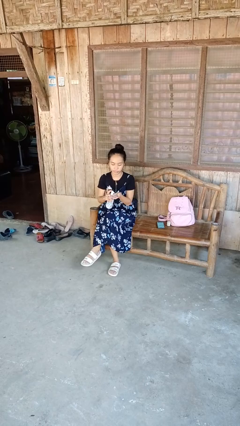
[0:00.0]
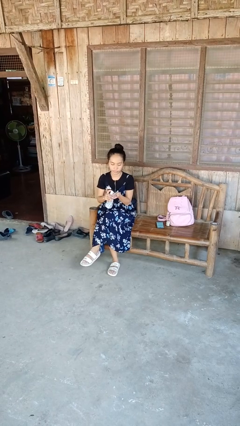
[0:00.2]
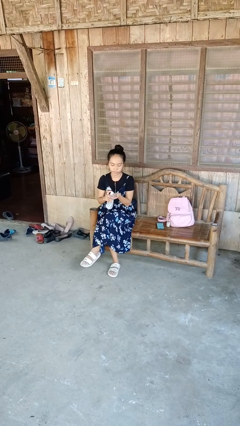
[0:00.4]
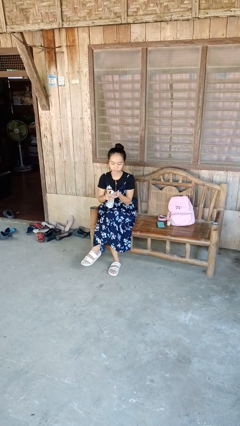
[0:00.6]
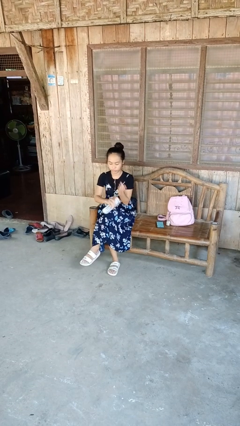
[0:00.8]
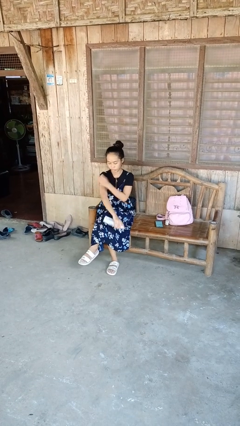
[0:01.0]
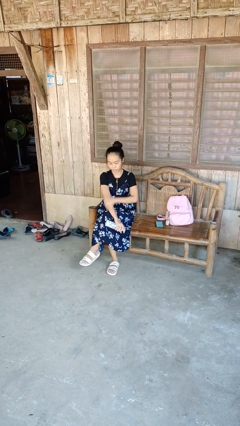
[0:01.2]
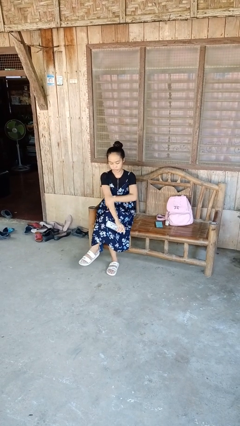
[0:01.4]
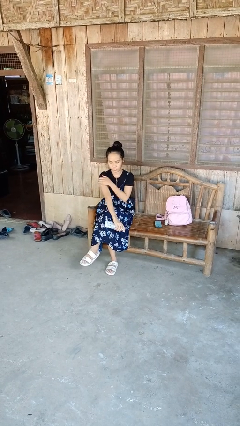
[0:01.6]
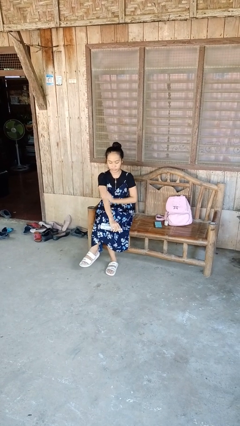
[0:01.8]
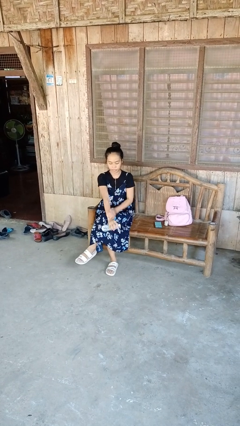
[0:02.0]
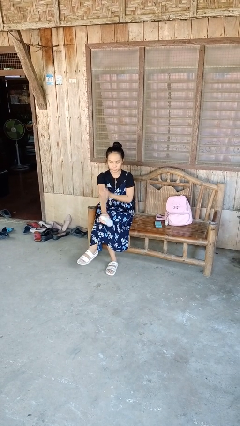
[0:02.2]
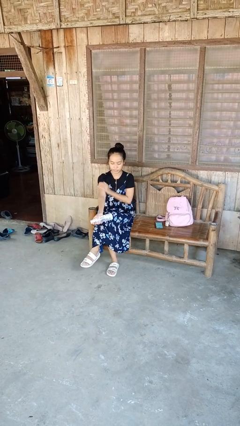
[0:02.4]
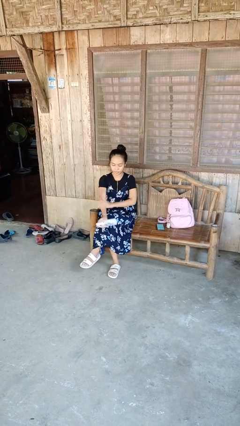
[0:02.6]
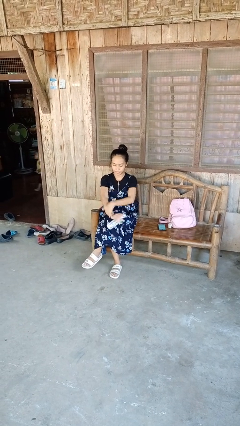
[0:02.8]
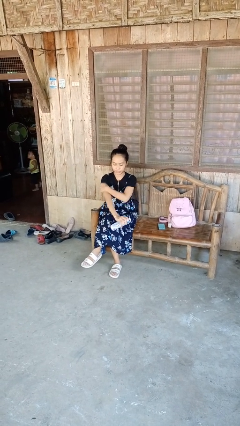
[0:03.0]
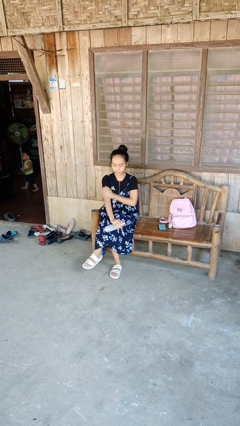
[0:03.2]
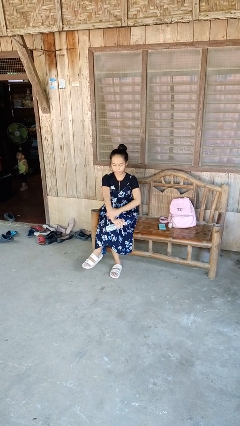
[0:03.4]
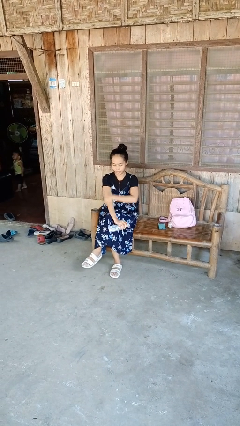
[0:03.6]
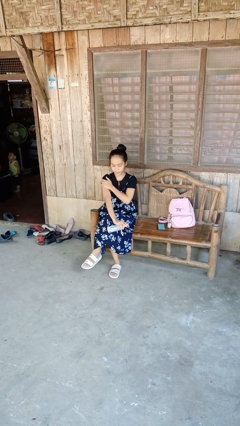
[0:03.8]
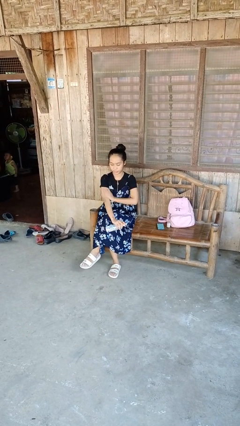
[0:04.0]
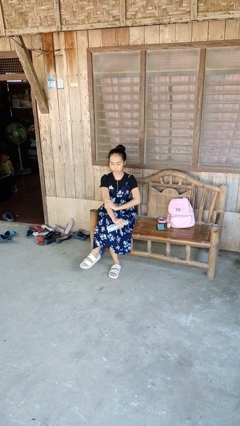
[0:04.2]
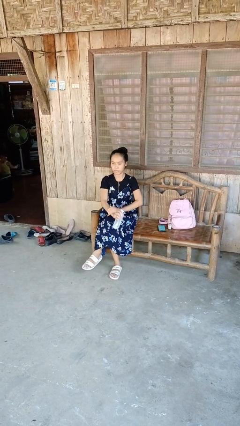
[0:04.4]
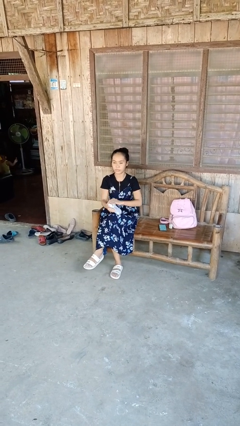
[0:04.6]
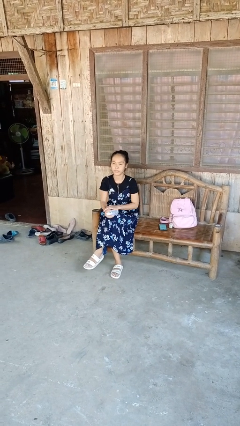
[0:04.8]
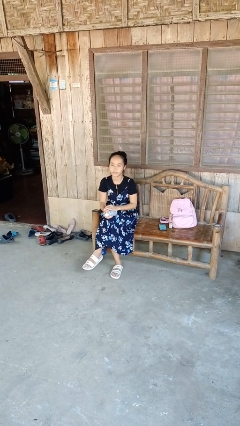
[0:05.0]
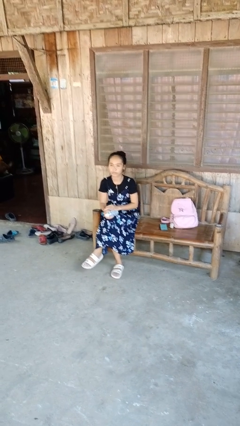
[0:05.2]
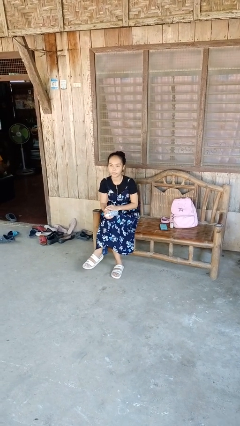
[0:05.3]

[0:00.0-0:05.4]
person applies sunscreen

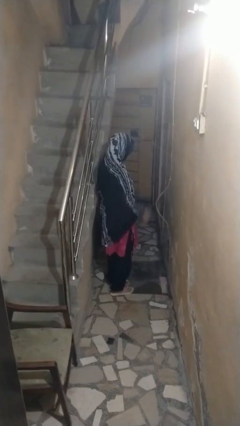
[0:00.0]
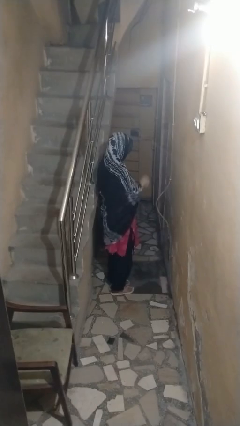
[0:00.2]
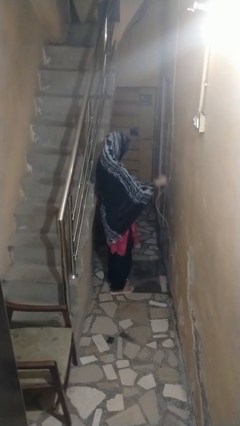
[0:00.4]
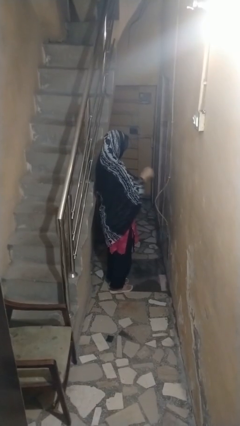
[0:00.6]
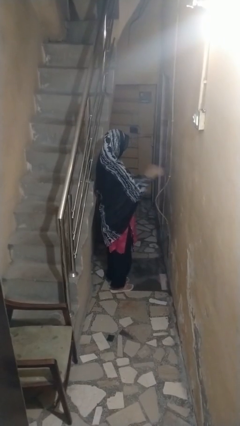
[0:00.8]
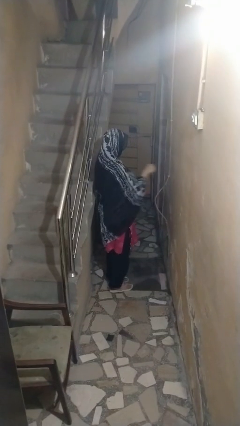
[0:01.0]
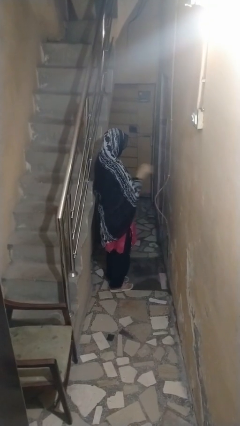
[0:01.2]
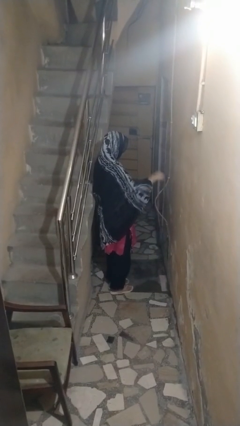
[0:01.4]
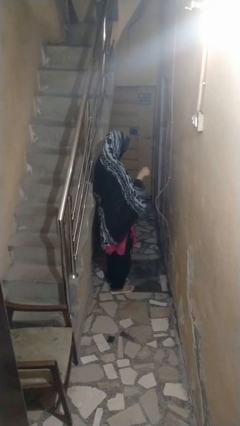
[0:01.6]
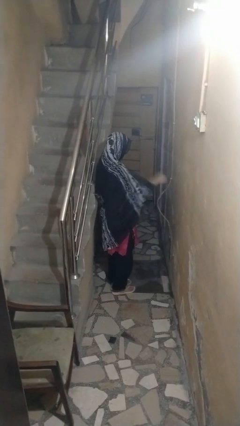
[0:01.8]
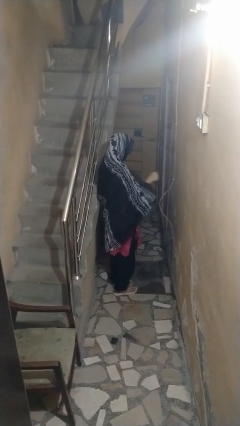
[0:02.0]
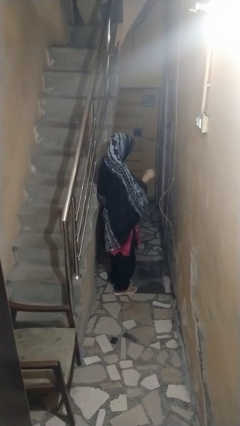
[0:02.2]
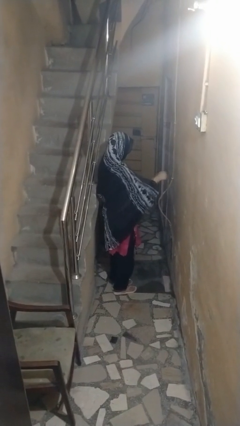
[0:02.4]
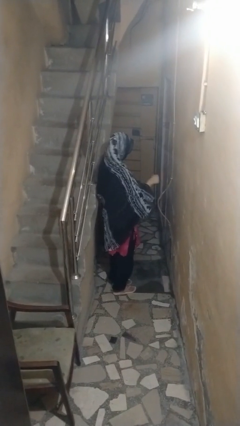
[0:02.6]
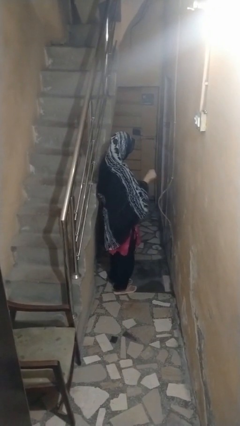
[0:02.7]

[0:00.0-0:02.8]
person punches

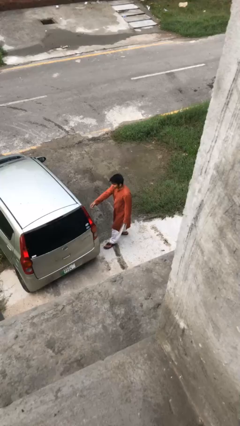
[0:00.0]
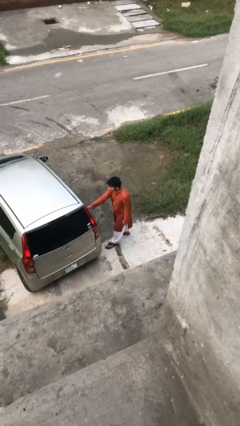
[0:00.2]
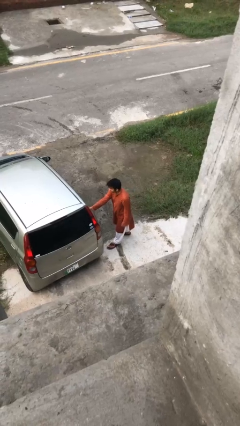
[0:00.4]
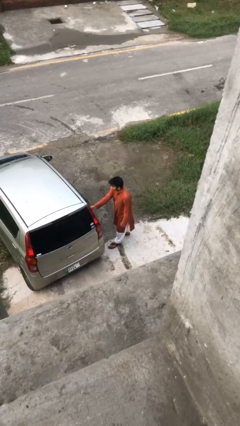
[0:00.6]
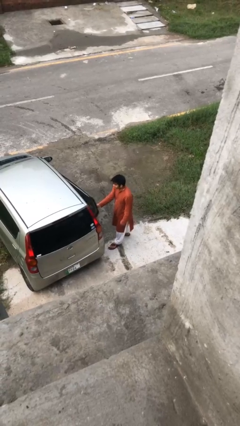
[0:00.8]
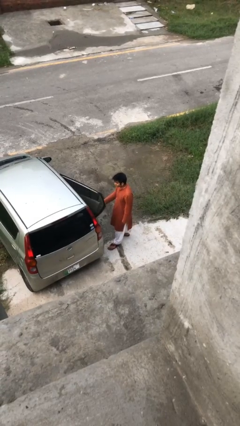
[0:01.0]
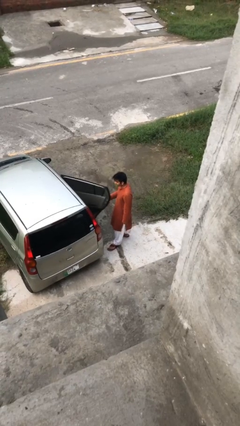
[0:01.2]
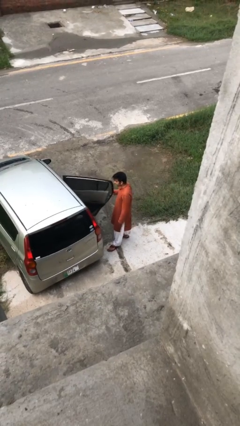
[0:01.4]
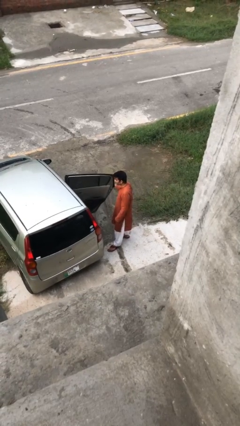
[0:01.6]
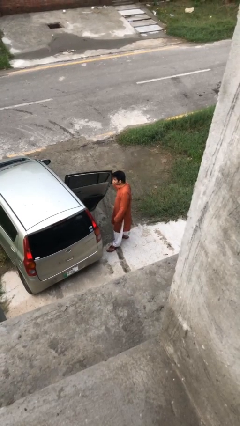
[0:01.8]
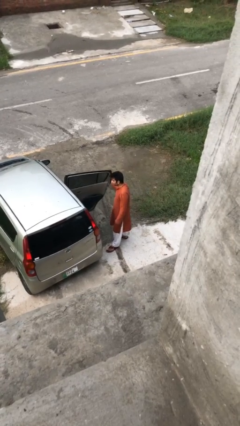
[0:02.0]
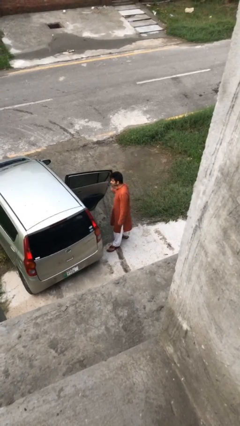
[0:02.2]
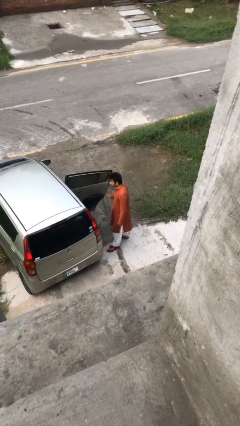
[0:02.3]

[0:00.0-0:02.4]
person opens car door

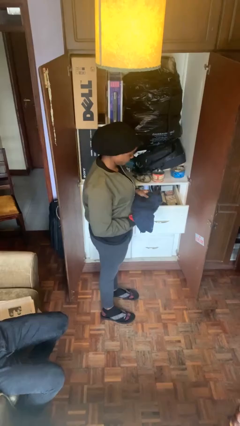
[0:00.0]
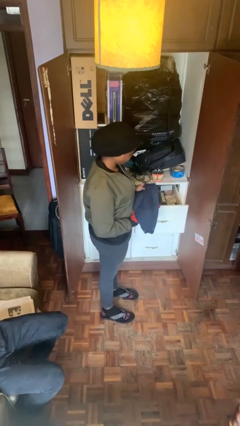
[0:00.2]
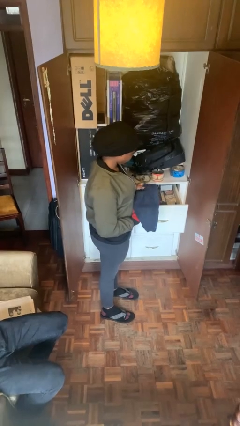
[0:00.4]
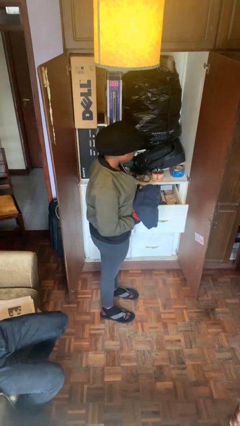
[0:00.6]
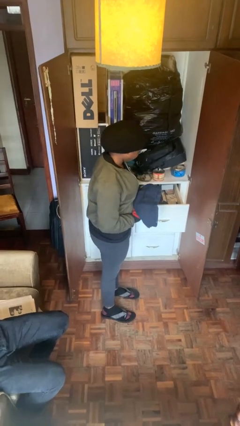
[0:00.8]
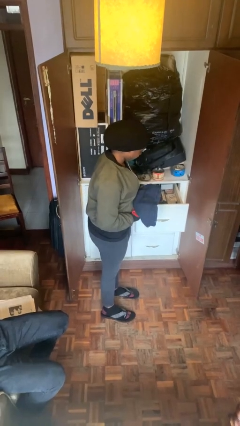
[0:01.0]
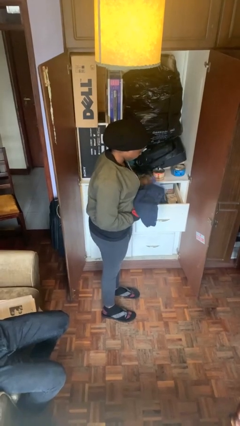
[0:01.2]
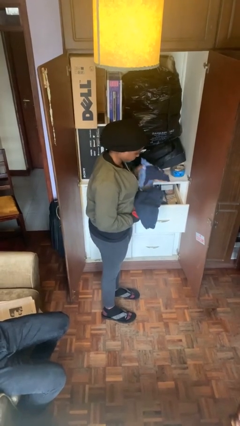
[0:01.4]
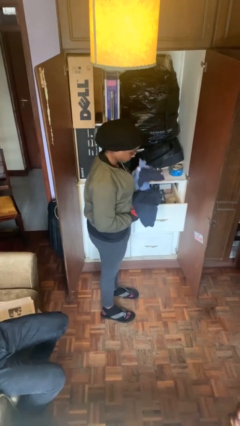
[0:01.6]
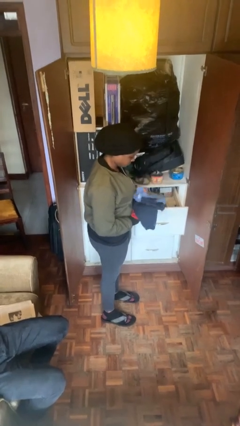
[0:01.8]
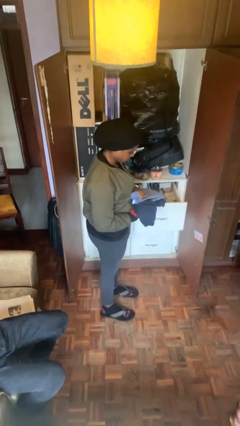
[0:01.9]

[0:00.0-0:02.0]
person takes clothes from dresser

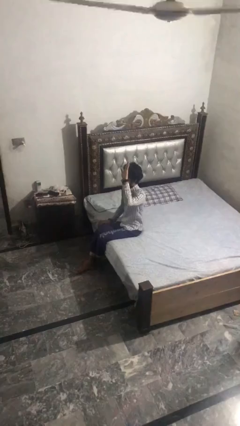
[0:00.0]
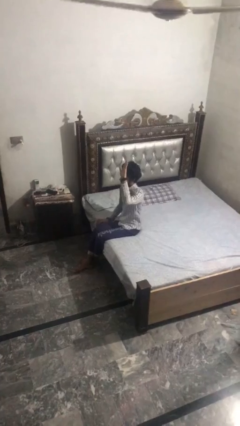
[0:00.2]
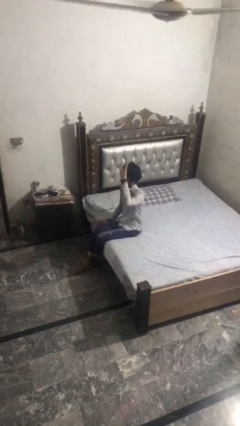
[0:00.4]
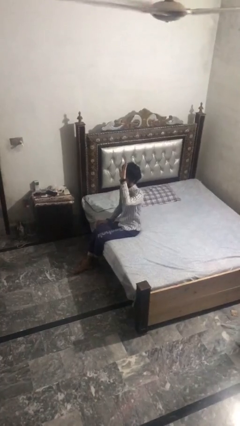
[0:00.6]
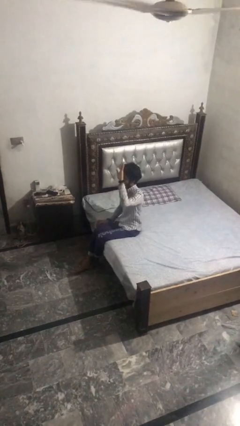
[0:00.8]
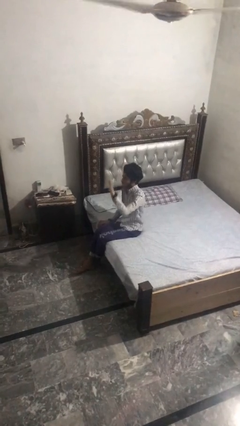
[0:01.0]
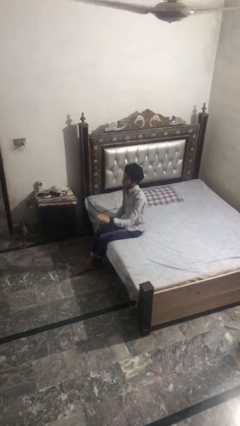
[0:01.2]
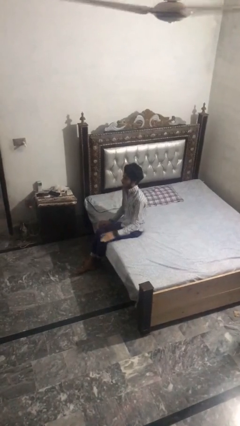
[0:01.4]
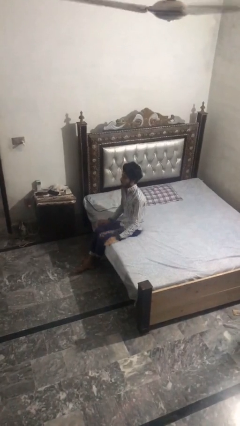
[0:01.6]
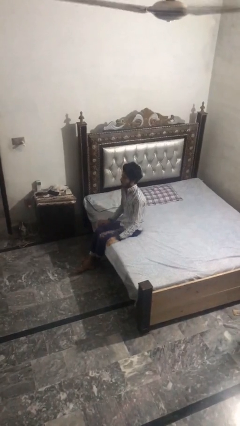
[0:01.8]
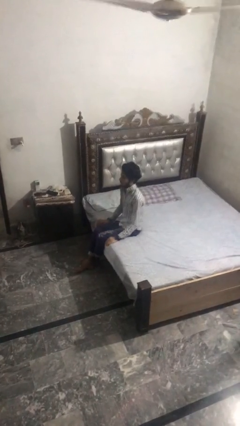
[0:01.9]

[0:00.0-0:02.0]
person gestures lower hand

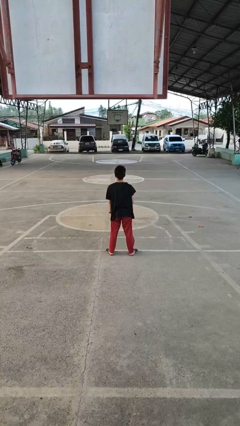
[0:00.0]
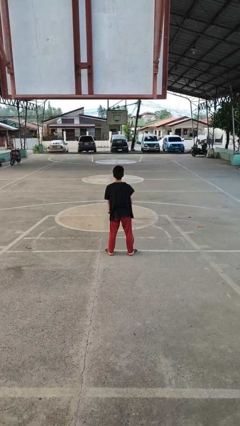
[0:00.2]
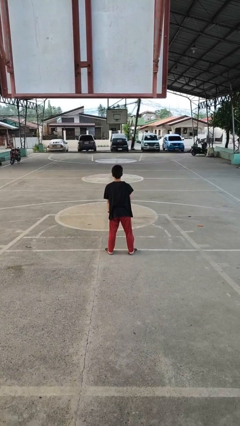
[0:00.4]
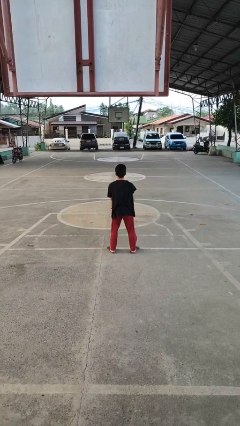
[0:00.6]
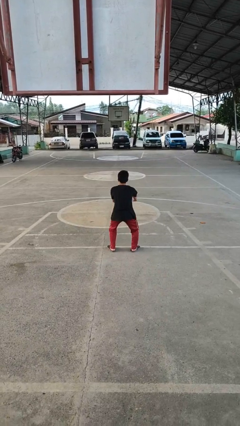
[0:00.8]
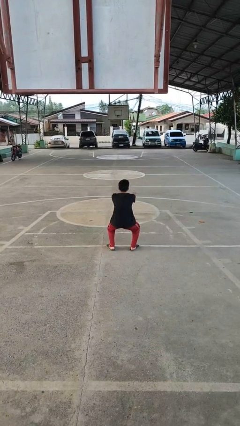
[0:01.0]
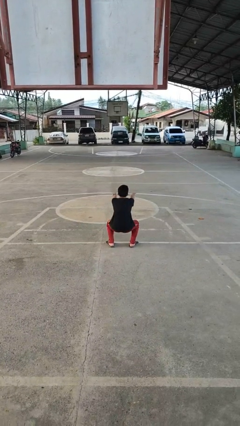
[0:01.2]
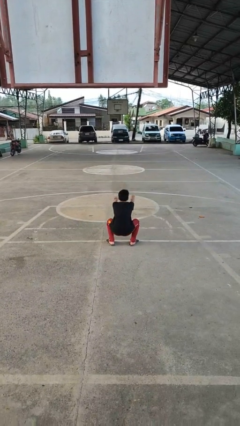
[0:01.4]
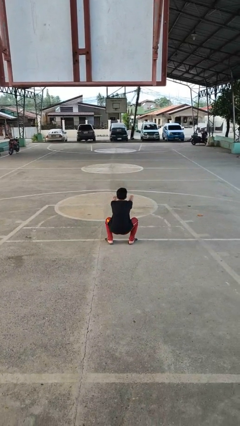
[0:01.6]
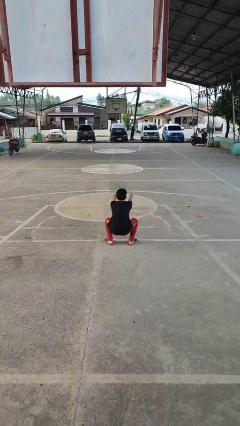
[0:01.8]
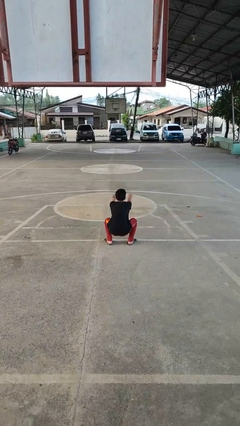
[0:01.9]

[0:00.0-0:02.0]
person squats

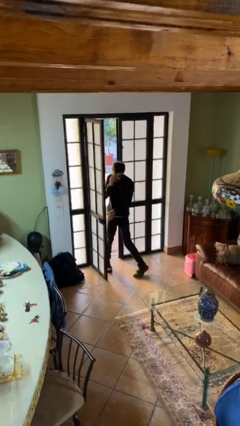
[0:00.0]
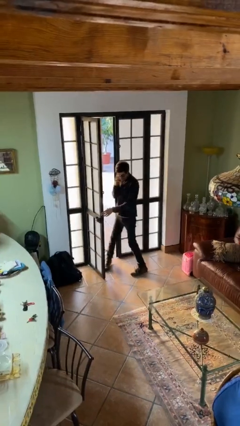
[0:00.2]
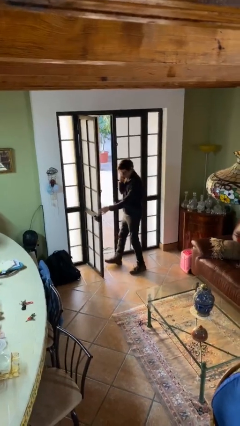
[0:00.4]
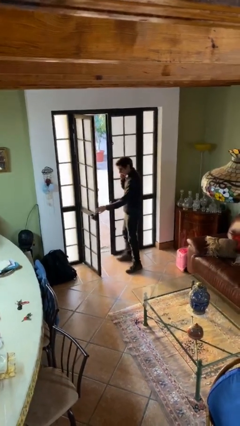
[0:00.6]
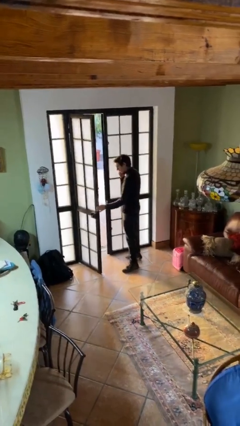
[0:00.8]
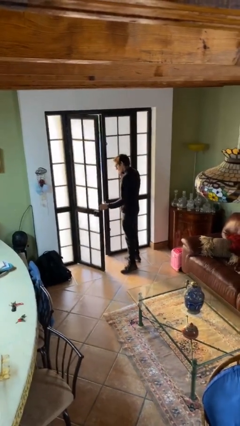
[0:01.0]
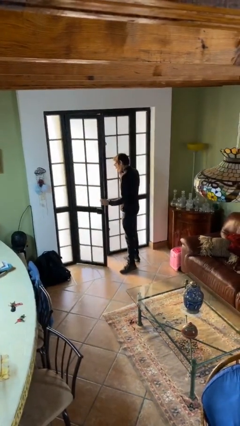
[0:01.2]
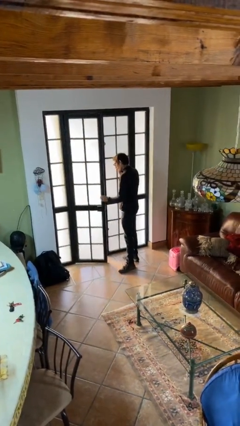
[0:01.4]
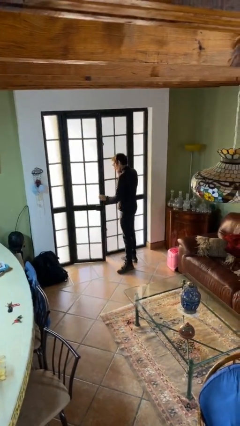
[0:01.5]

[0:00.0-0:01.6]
person enters scene through structure
